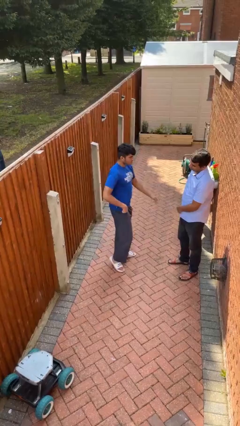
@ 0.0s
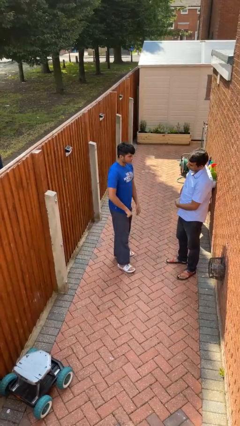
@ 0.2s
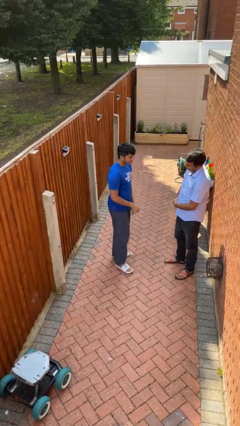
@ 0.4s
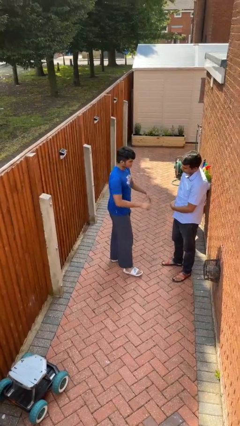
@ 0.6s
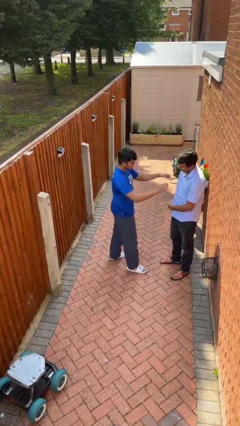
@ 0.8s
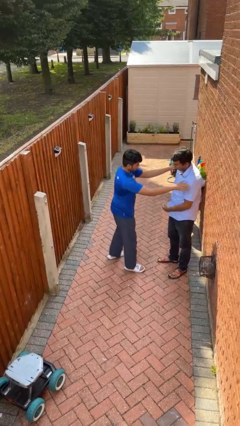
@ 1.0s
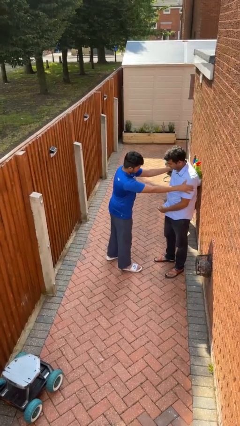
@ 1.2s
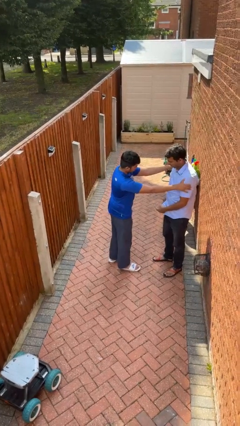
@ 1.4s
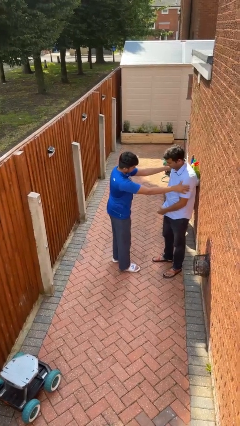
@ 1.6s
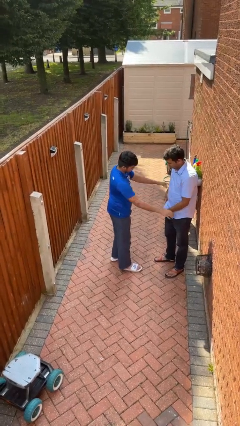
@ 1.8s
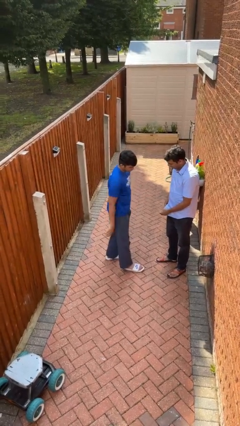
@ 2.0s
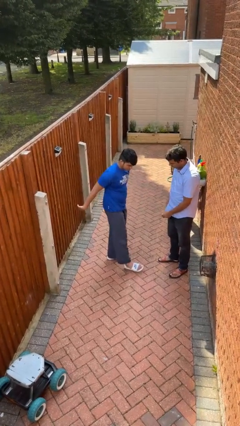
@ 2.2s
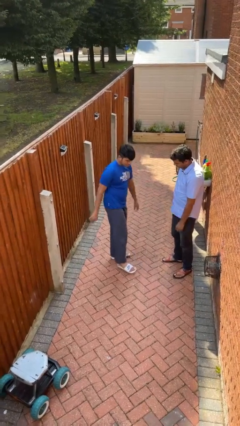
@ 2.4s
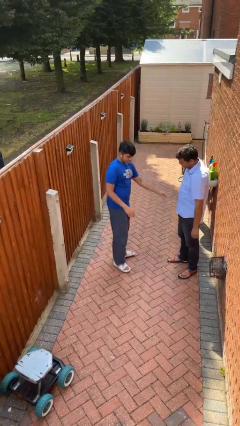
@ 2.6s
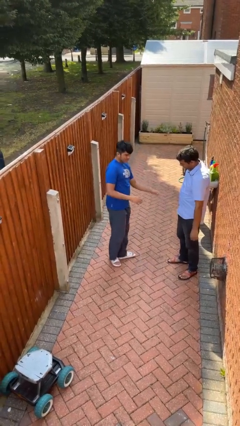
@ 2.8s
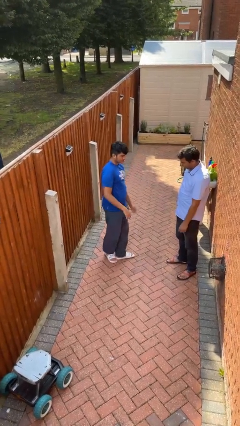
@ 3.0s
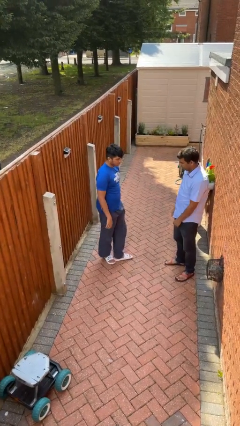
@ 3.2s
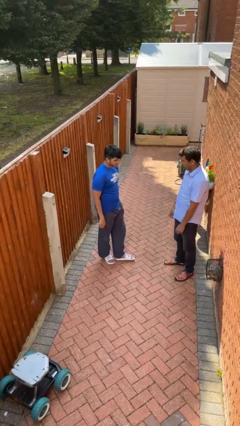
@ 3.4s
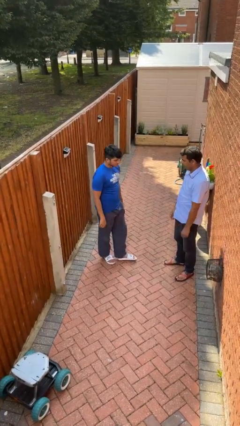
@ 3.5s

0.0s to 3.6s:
person shoves person

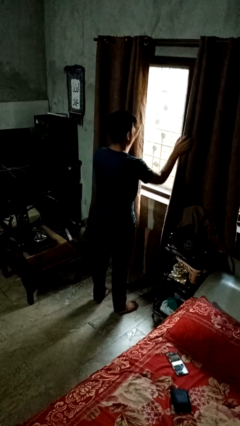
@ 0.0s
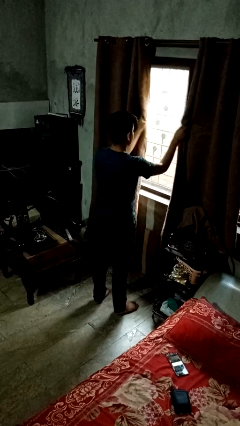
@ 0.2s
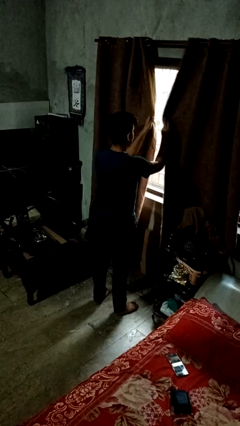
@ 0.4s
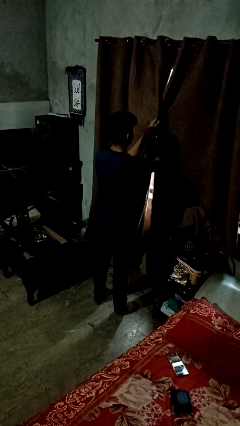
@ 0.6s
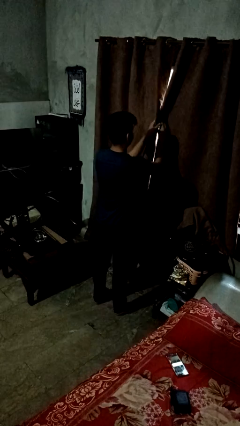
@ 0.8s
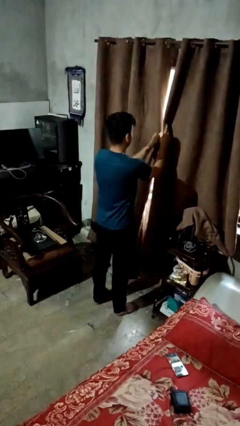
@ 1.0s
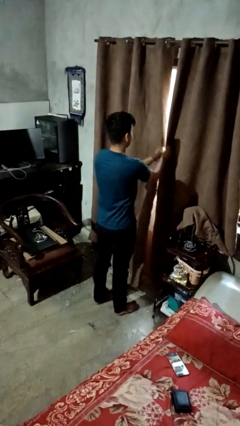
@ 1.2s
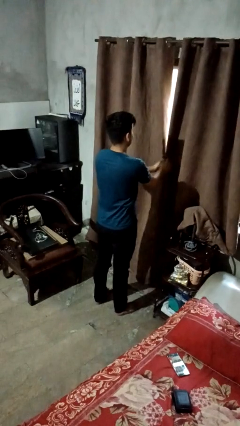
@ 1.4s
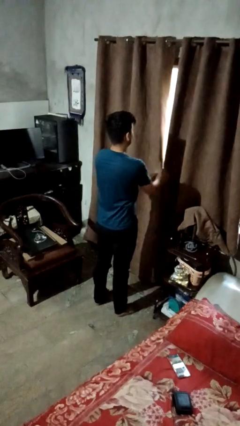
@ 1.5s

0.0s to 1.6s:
person closes curtains

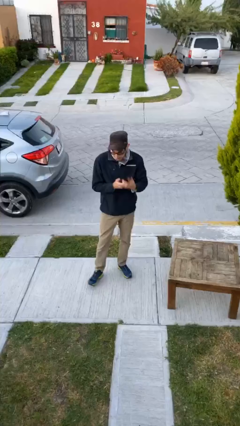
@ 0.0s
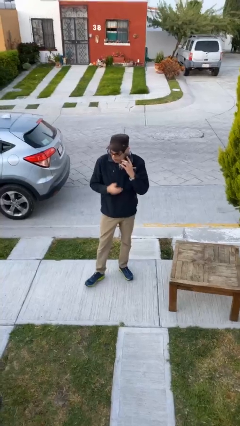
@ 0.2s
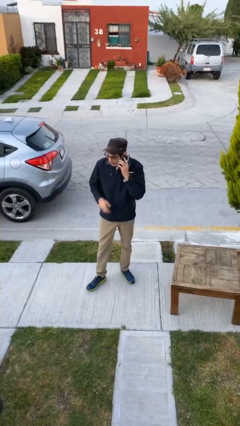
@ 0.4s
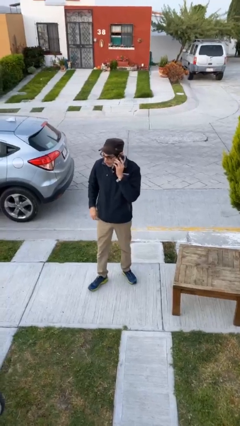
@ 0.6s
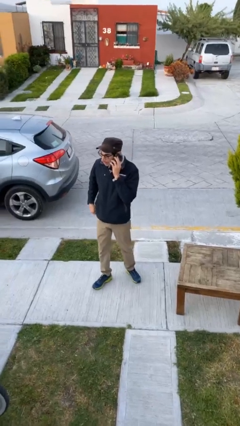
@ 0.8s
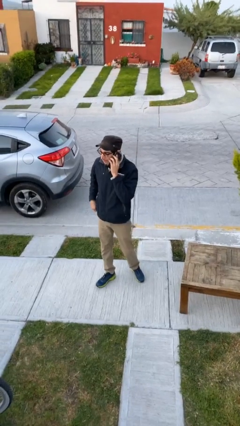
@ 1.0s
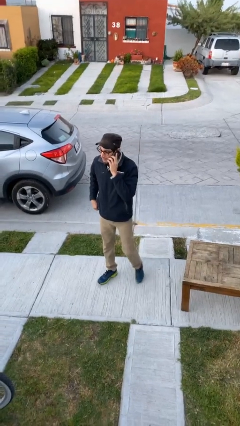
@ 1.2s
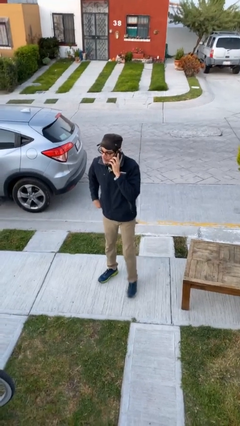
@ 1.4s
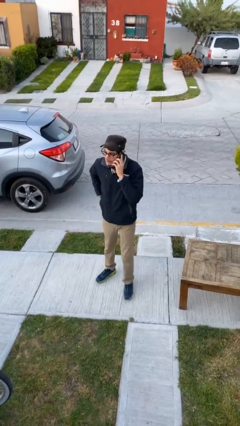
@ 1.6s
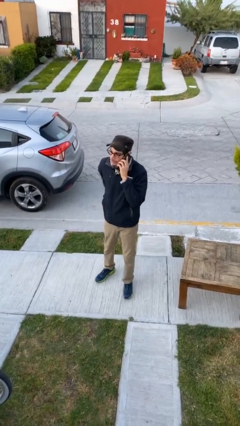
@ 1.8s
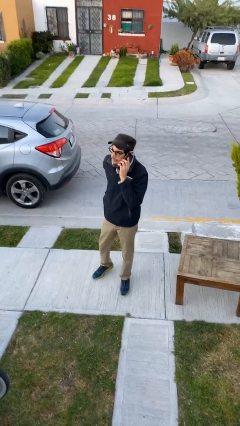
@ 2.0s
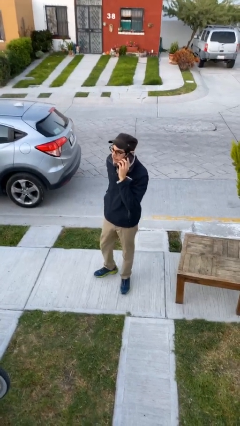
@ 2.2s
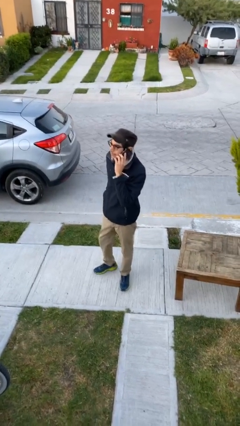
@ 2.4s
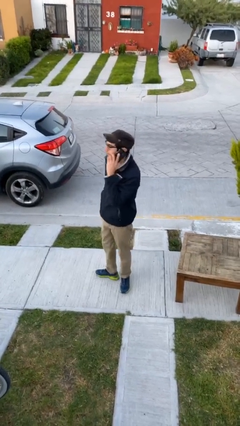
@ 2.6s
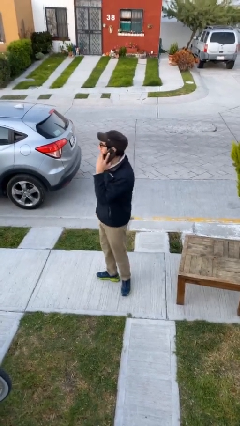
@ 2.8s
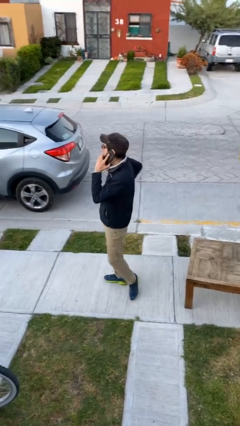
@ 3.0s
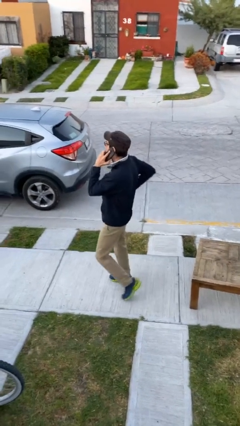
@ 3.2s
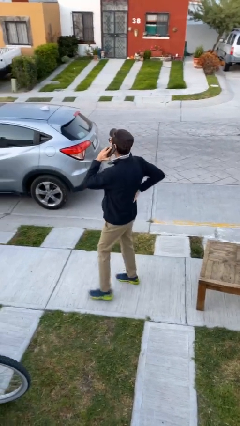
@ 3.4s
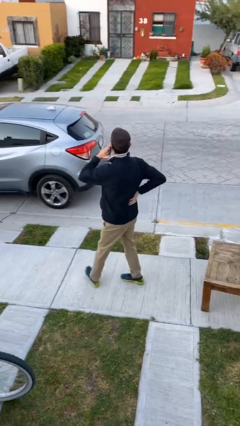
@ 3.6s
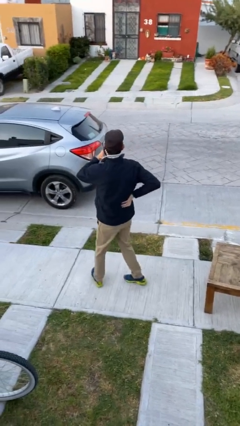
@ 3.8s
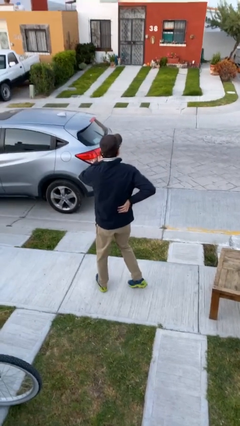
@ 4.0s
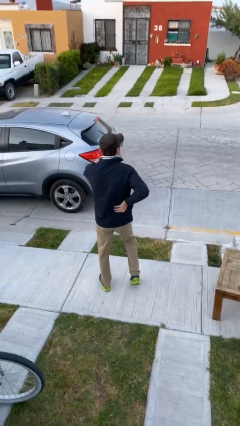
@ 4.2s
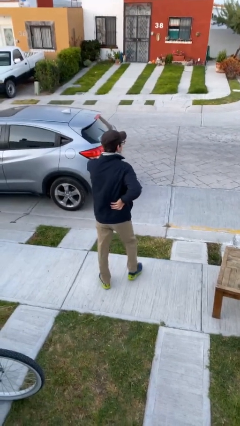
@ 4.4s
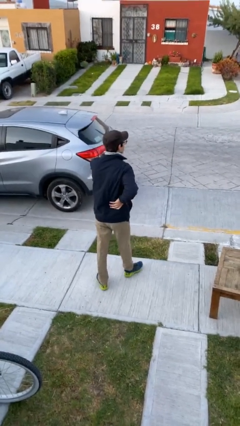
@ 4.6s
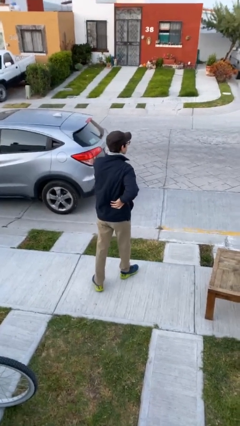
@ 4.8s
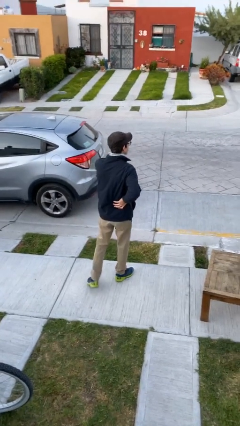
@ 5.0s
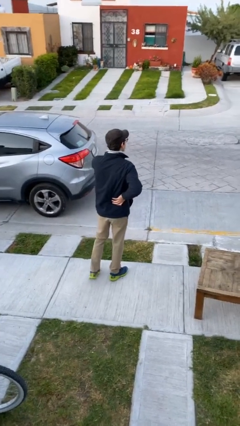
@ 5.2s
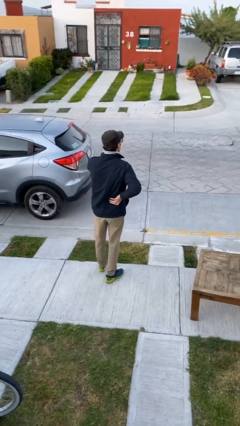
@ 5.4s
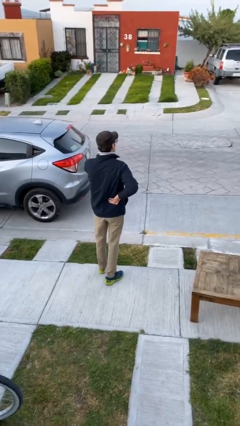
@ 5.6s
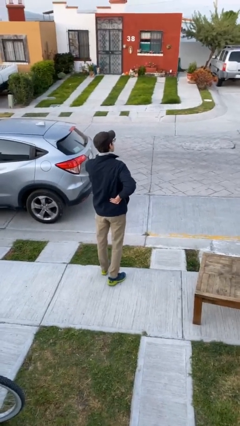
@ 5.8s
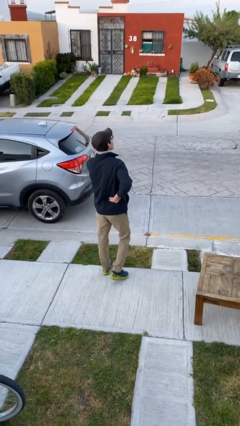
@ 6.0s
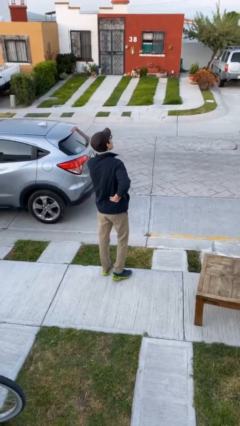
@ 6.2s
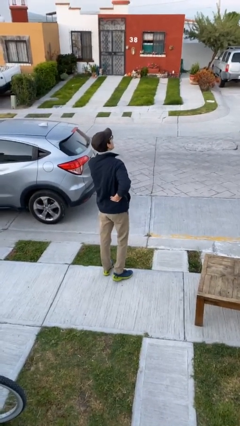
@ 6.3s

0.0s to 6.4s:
person talks on phone

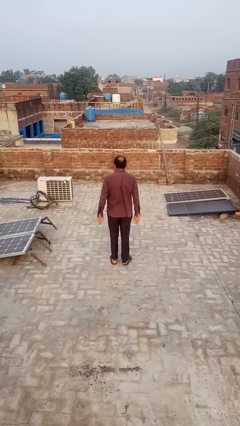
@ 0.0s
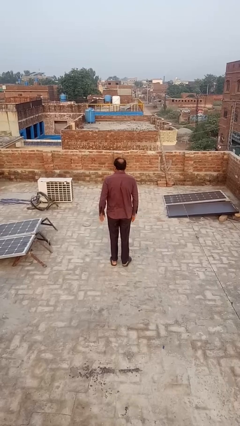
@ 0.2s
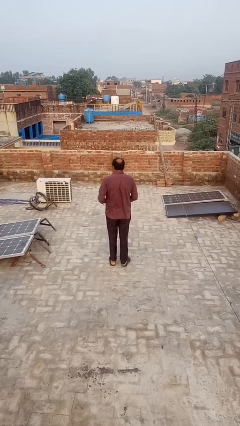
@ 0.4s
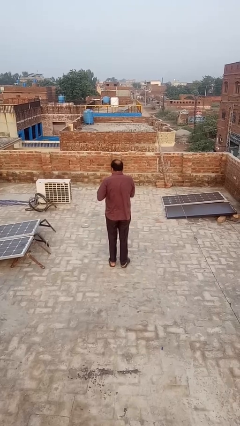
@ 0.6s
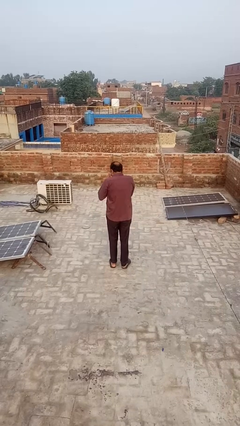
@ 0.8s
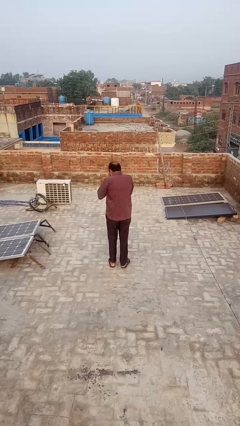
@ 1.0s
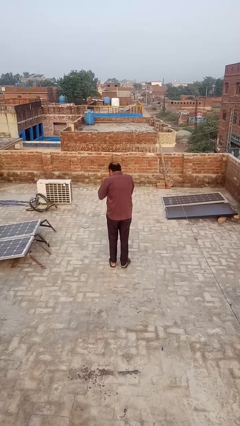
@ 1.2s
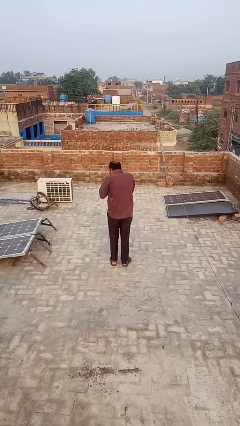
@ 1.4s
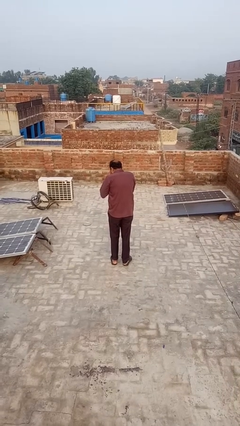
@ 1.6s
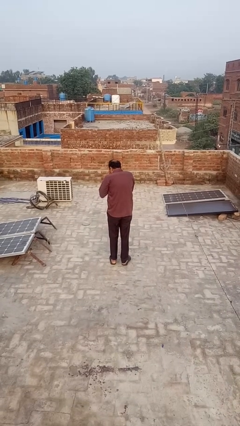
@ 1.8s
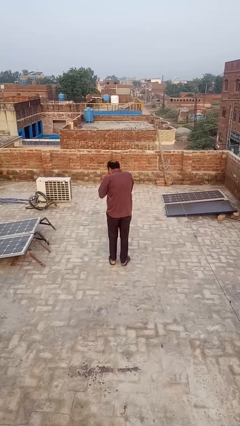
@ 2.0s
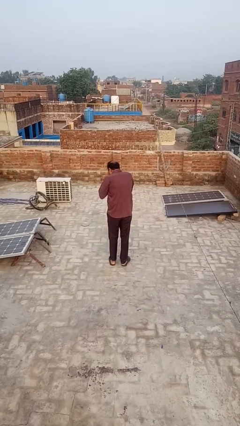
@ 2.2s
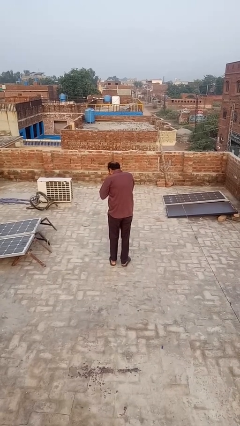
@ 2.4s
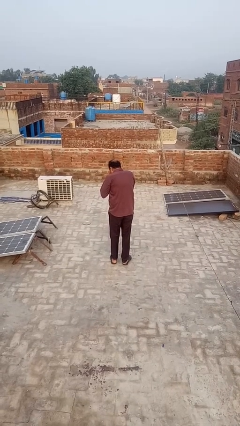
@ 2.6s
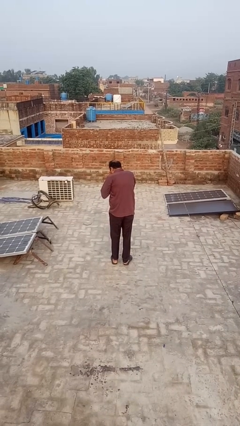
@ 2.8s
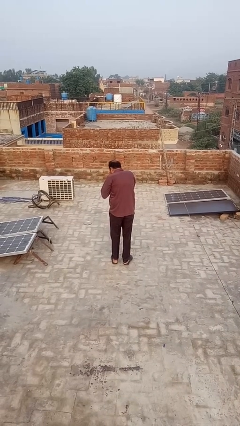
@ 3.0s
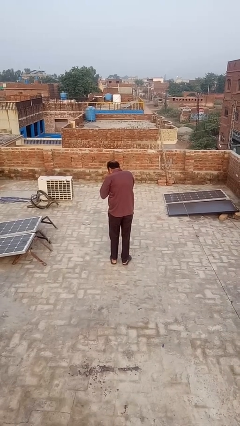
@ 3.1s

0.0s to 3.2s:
person blows into hands

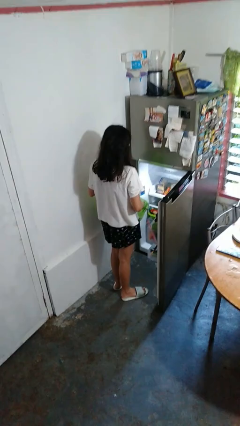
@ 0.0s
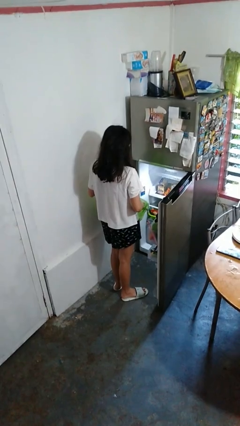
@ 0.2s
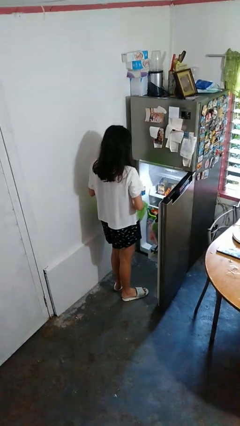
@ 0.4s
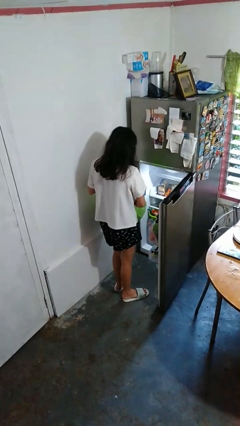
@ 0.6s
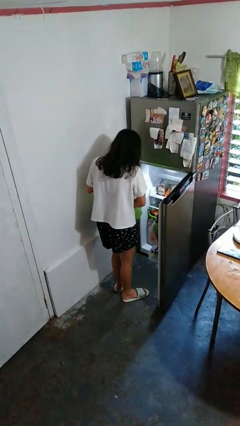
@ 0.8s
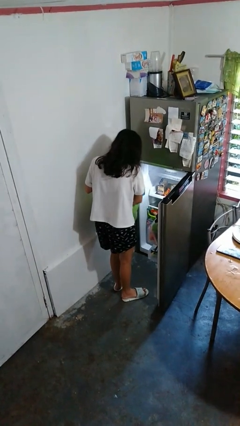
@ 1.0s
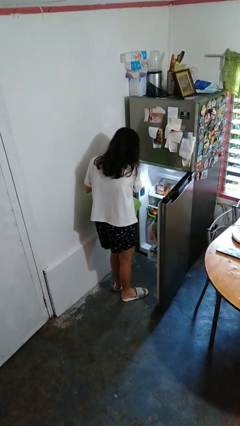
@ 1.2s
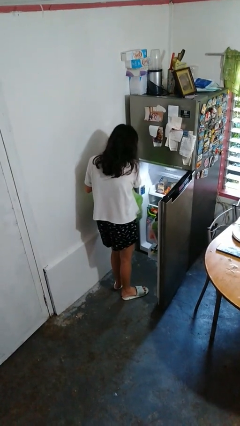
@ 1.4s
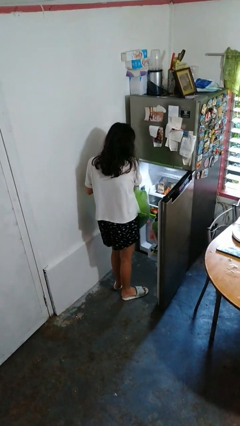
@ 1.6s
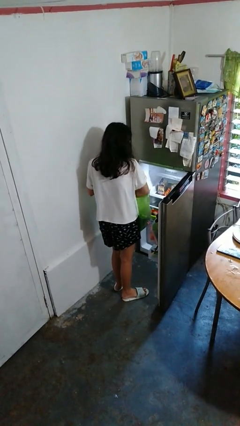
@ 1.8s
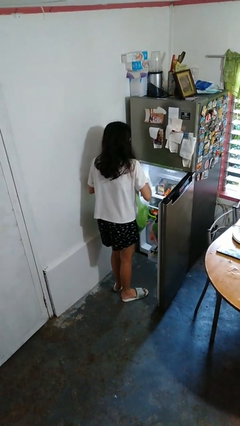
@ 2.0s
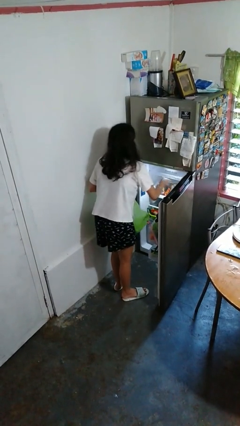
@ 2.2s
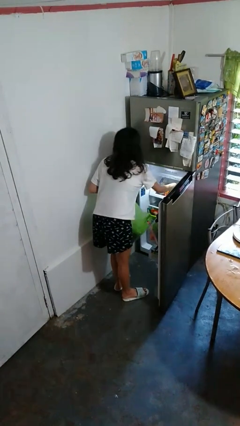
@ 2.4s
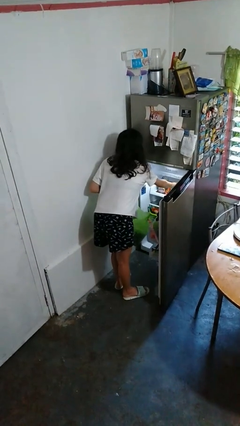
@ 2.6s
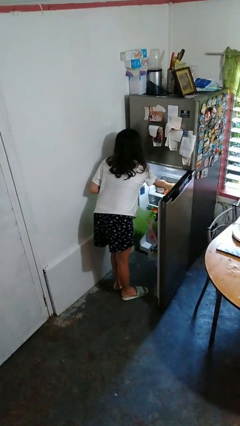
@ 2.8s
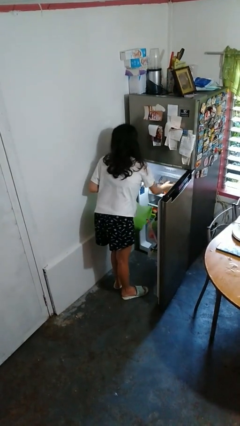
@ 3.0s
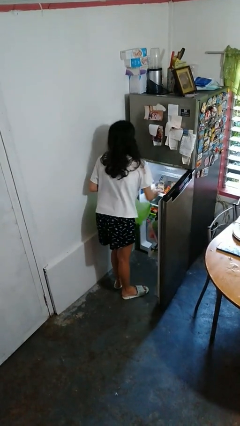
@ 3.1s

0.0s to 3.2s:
person loads groceries into refrigerator
